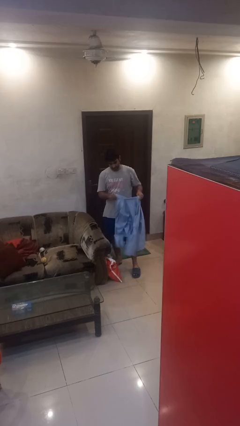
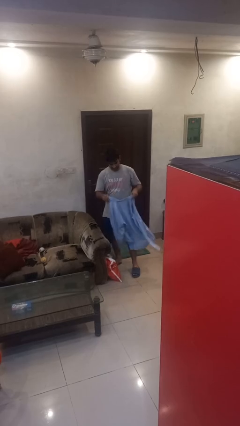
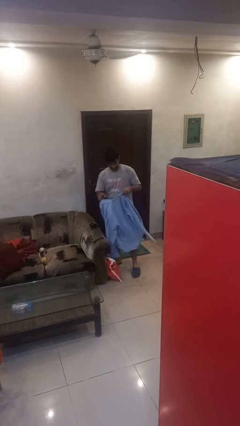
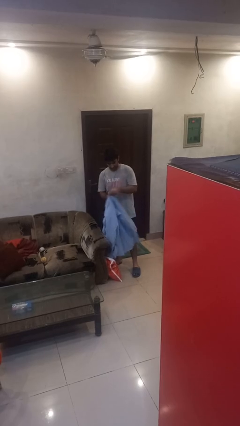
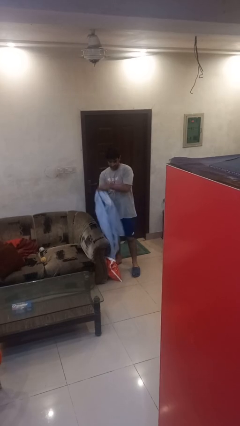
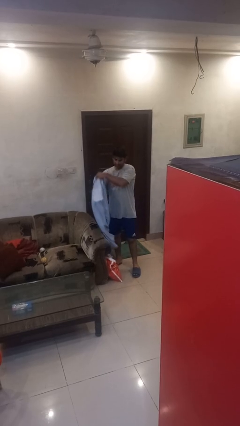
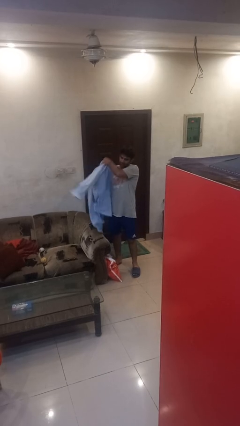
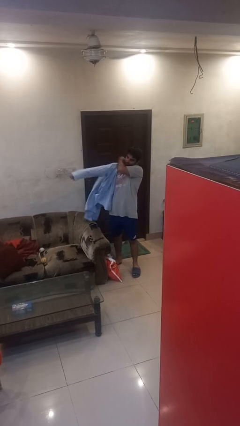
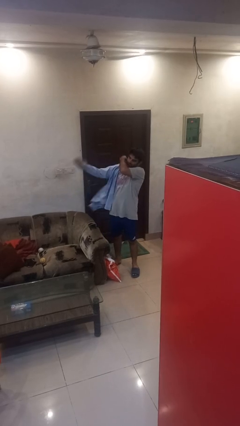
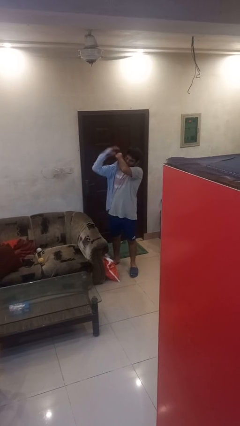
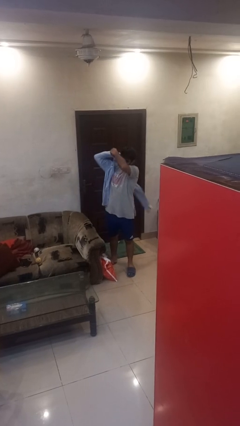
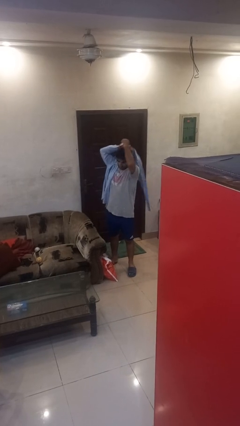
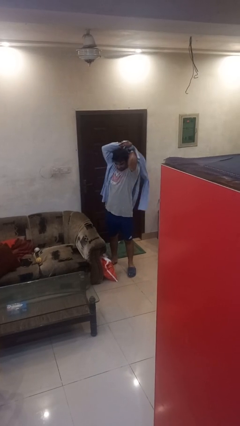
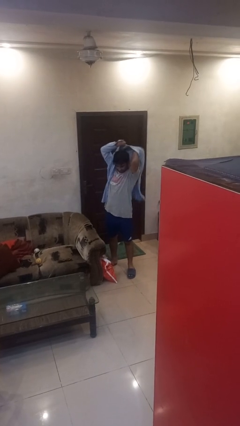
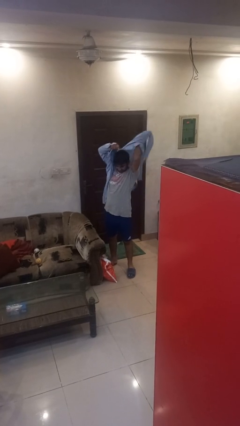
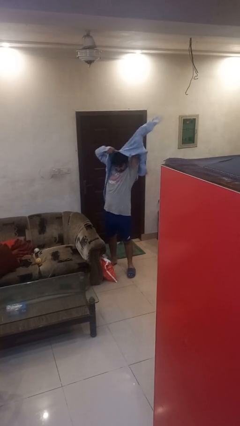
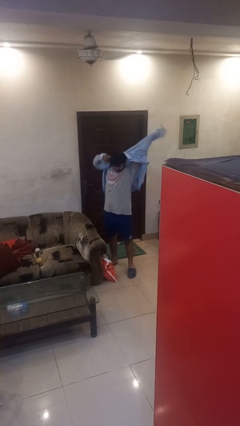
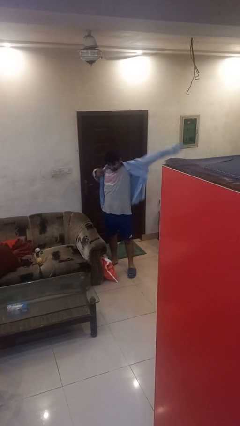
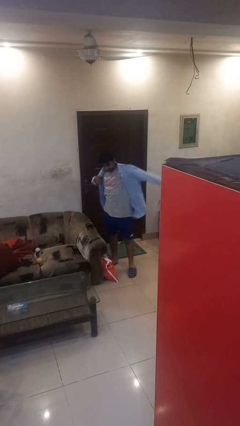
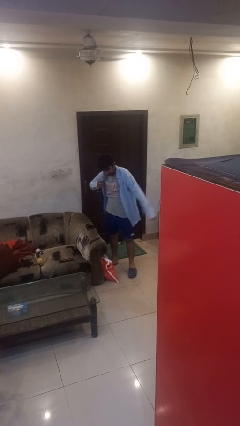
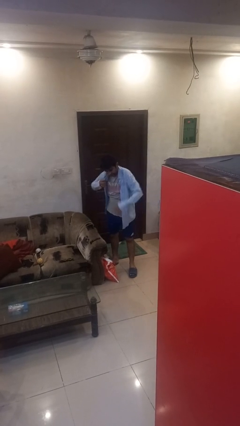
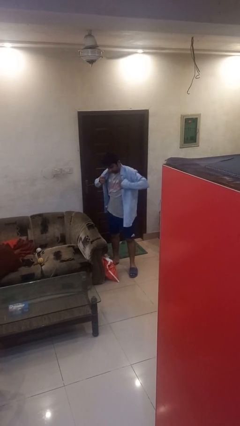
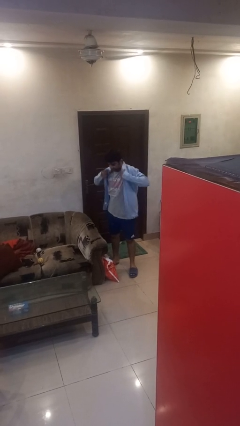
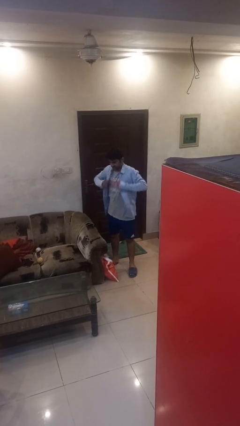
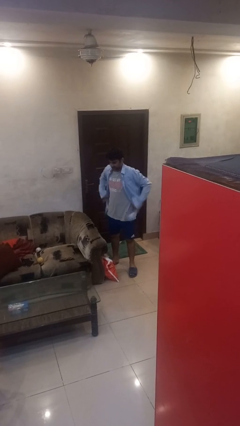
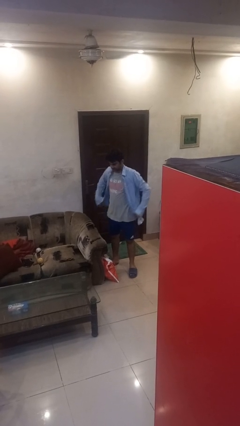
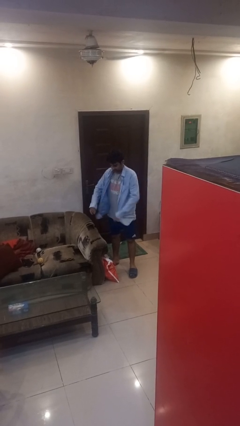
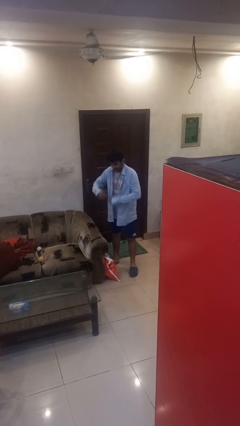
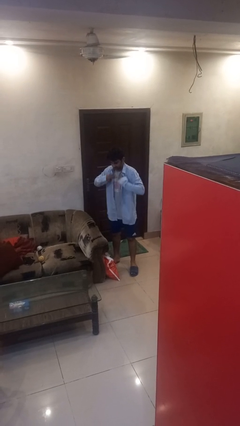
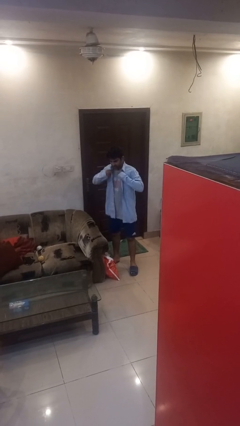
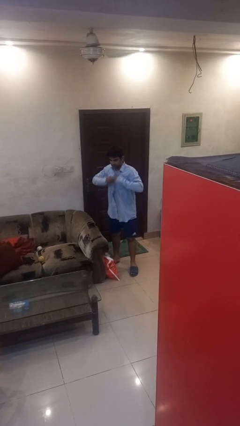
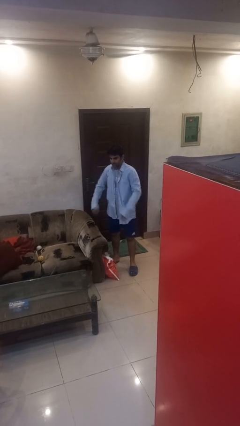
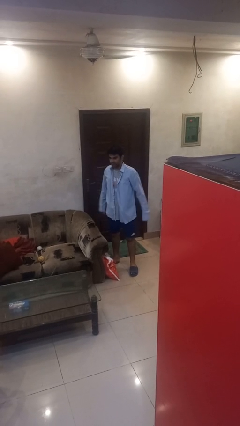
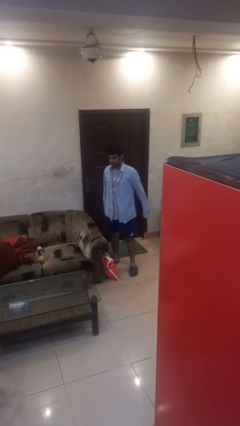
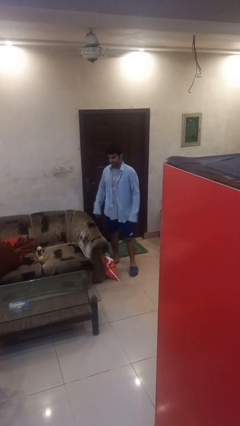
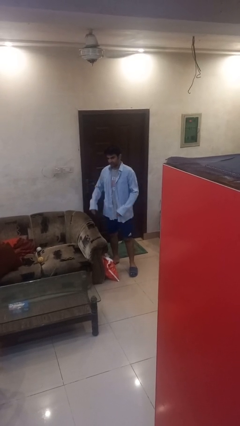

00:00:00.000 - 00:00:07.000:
person puts on shirt

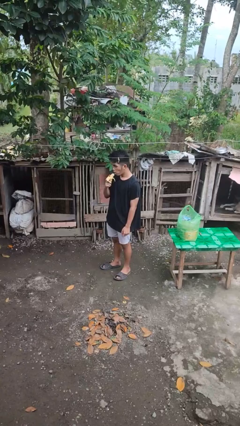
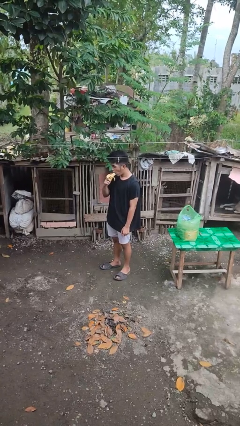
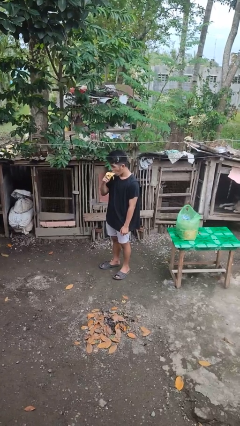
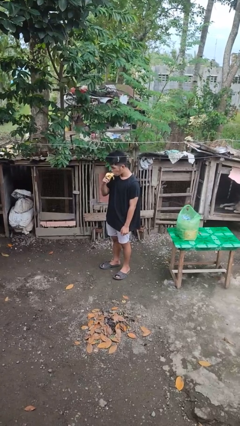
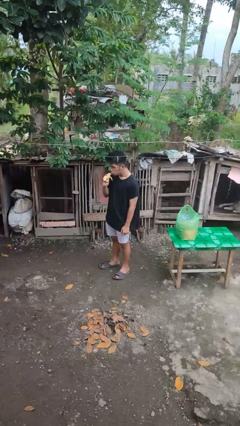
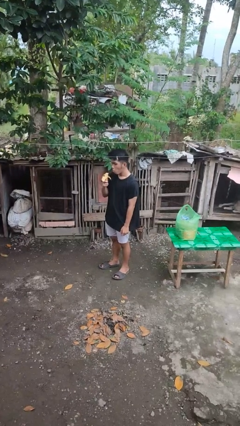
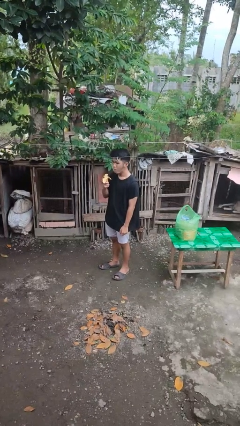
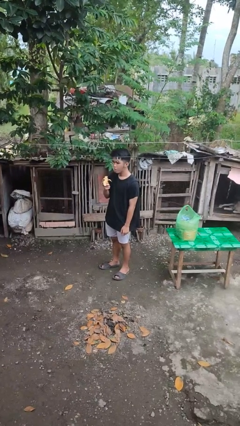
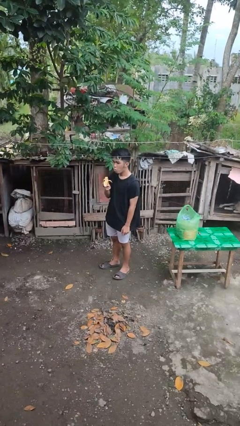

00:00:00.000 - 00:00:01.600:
person eats banana

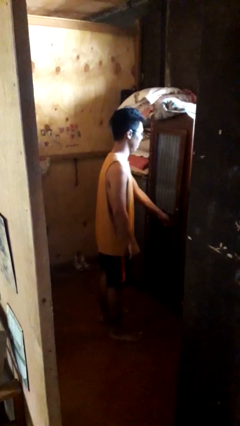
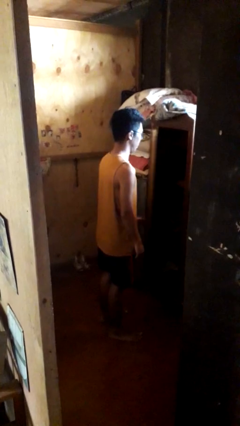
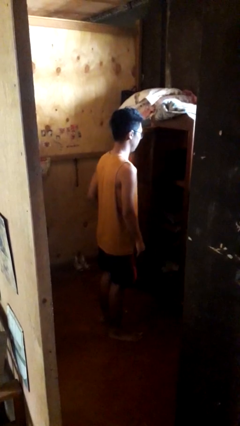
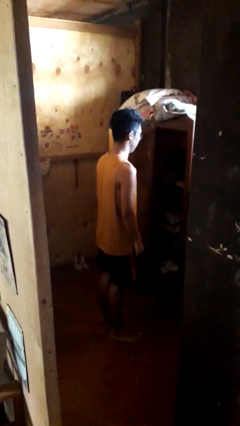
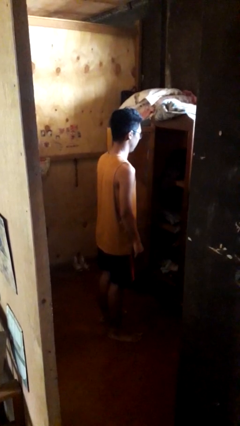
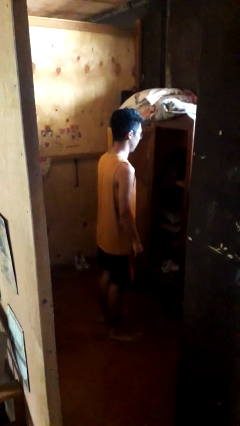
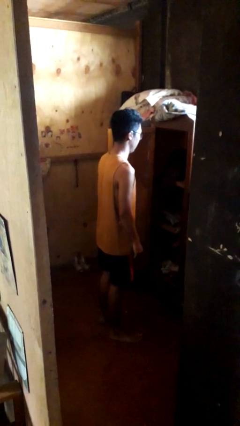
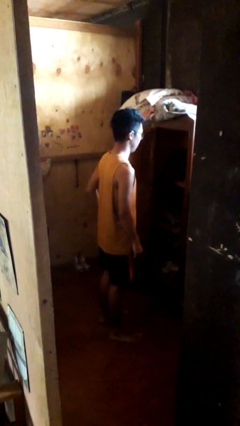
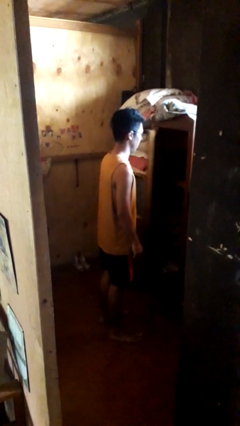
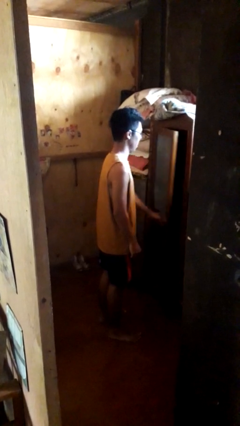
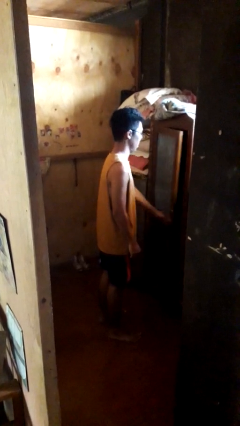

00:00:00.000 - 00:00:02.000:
person opens closet door

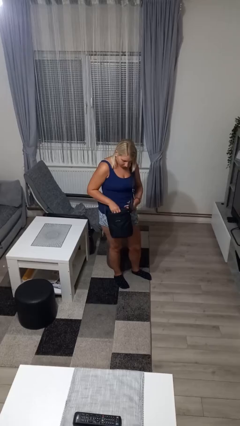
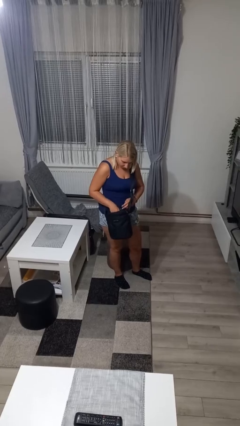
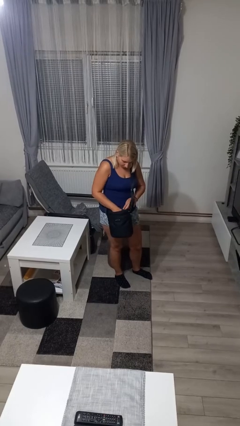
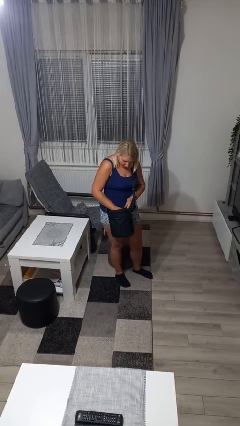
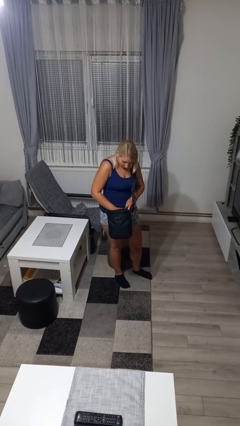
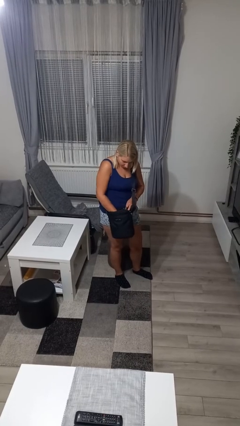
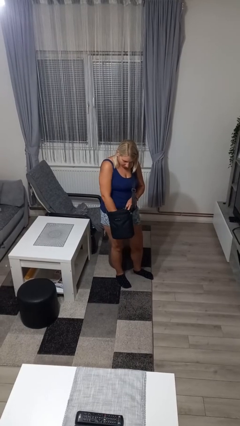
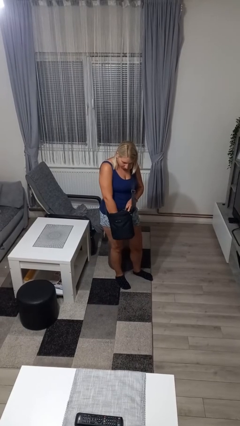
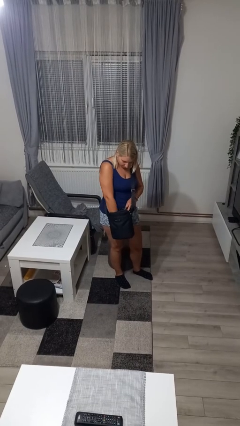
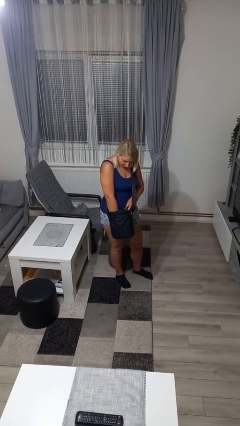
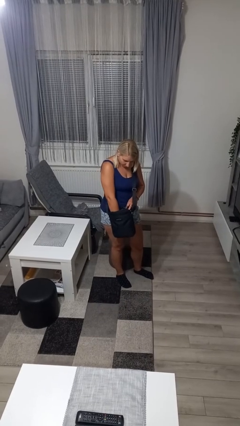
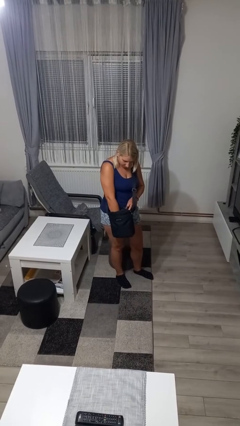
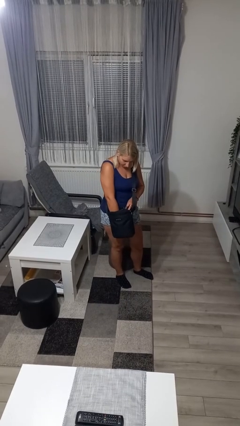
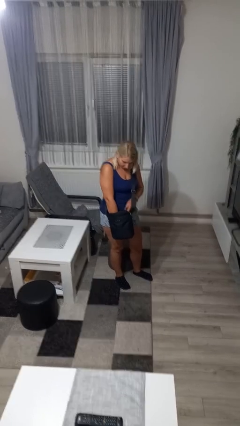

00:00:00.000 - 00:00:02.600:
person searches in purse

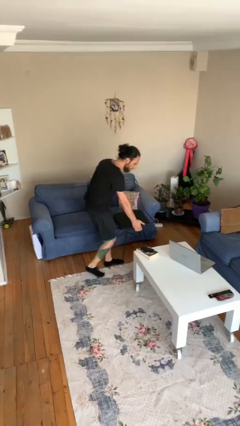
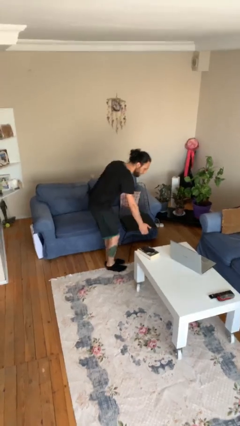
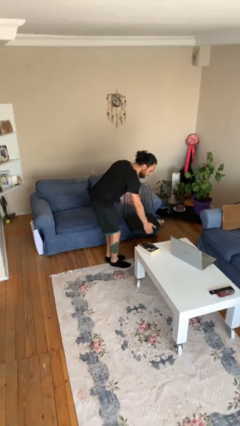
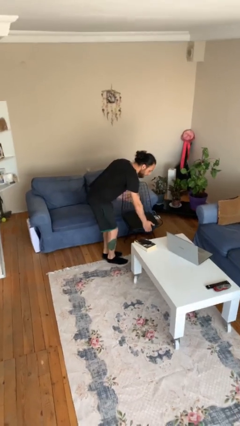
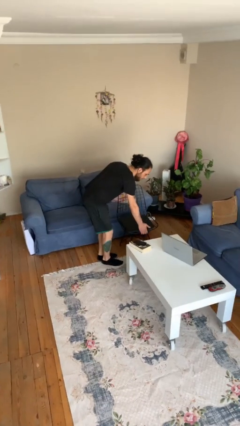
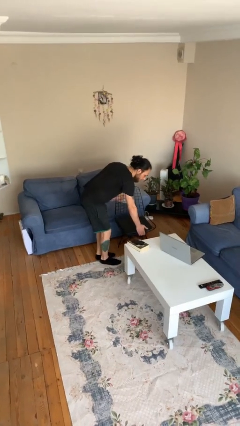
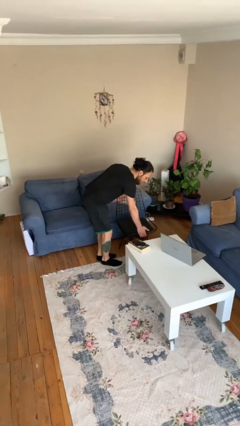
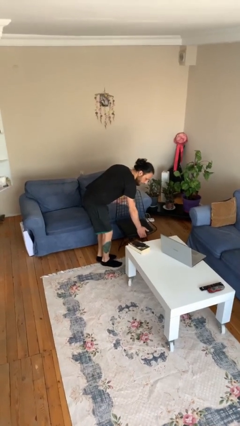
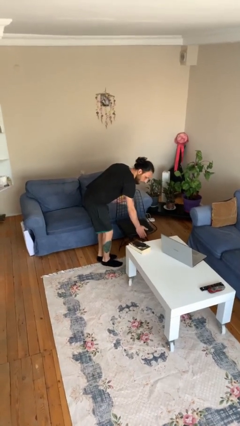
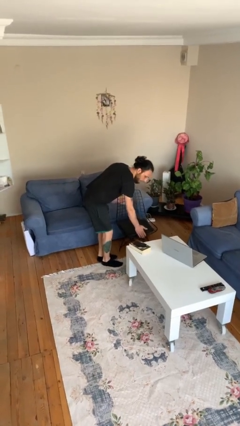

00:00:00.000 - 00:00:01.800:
person puts down object on floor

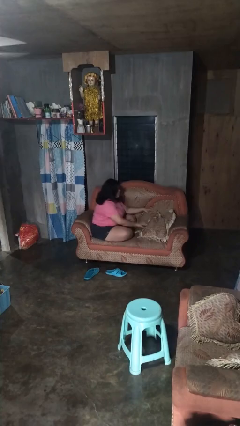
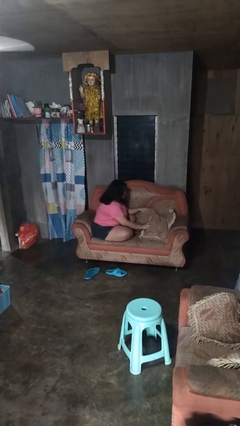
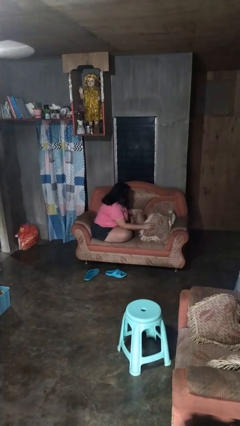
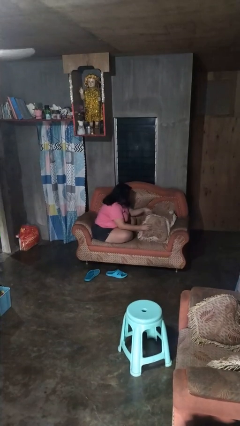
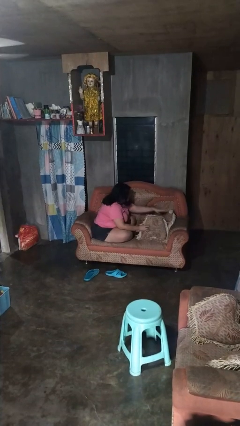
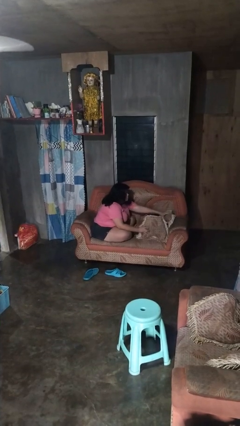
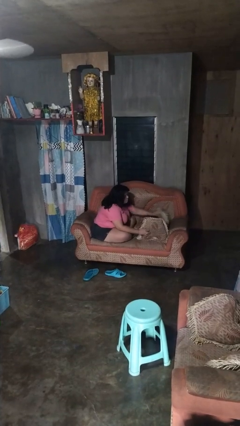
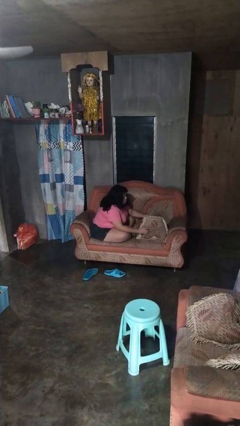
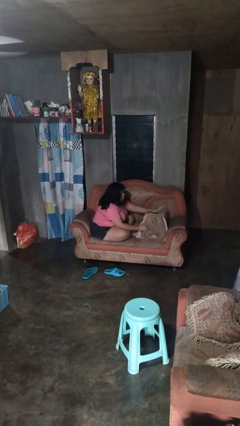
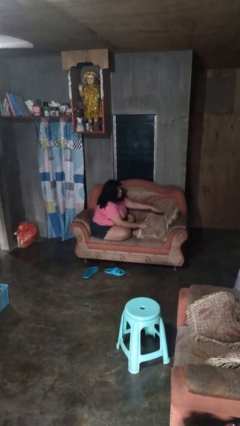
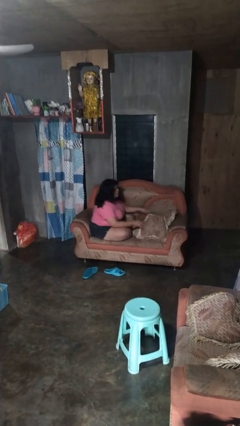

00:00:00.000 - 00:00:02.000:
person searches in couch

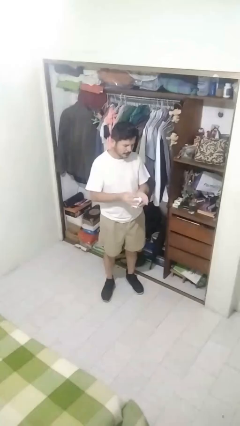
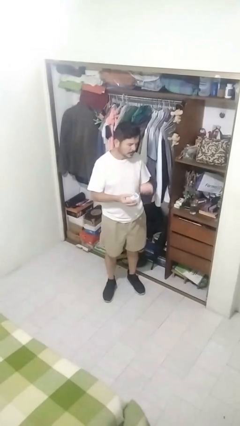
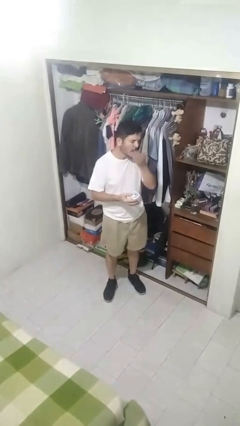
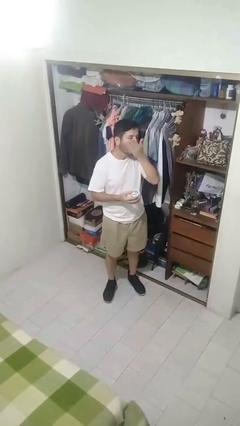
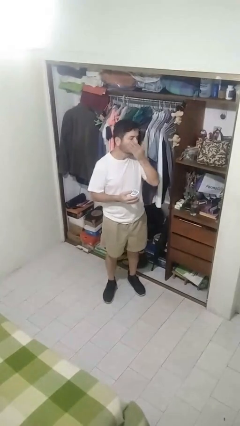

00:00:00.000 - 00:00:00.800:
person takes medicine pills
